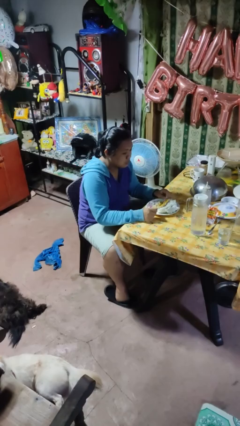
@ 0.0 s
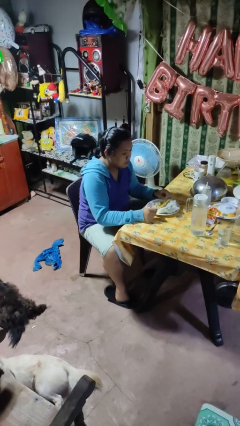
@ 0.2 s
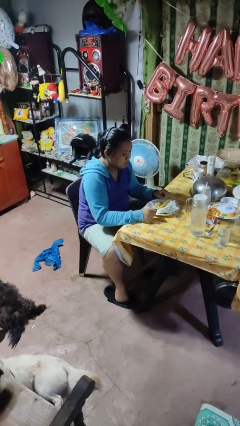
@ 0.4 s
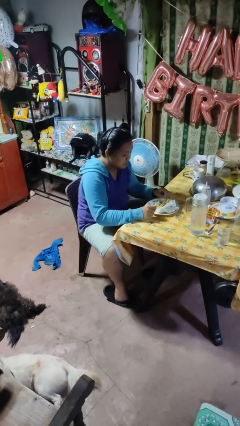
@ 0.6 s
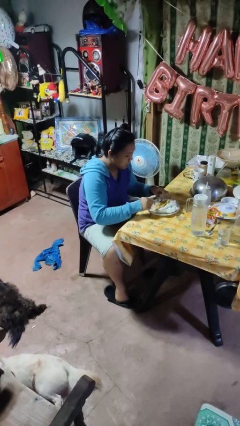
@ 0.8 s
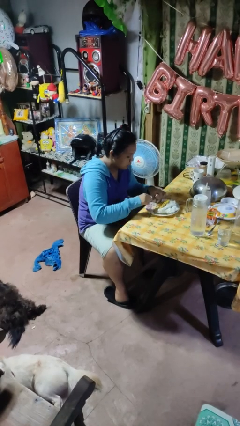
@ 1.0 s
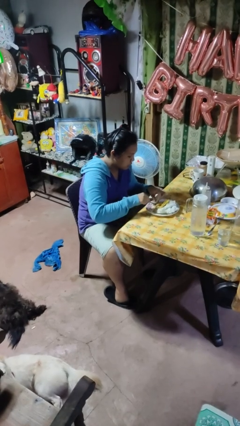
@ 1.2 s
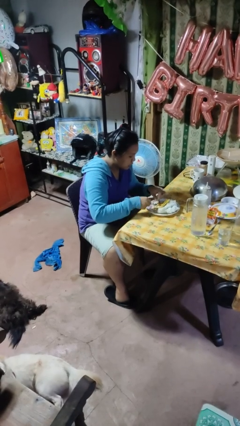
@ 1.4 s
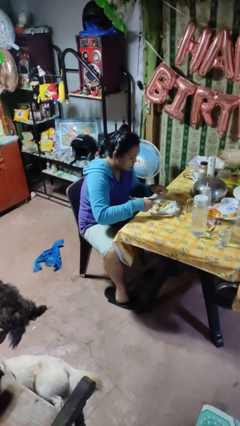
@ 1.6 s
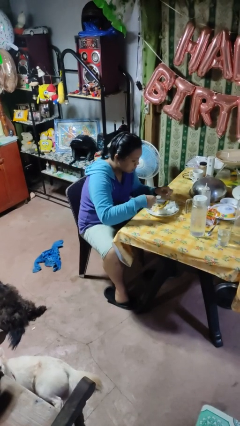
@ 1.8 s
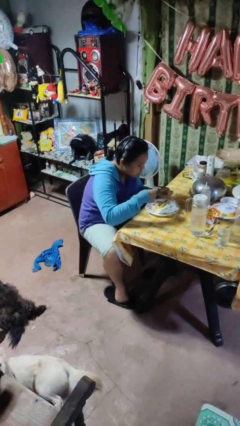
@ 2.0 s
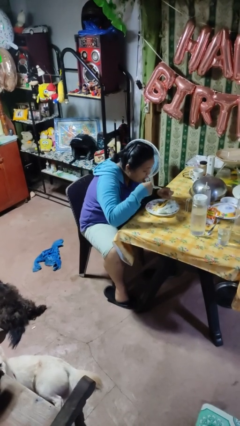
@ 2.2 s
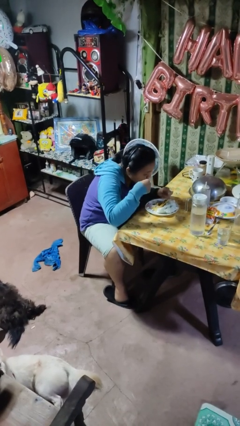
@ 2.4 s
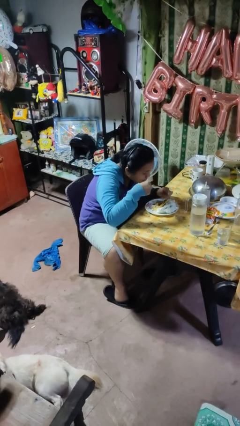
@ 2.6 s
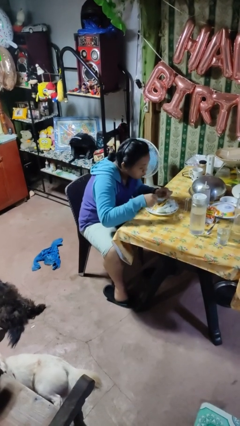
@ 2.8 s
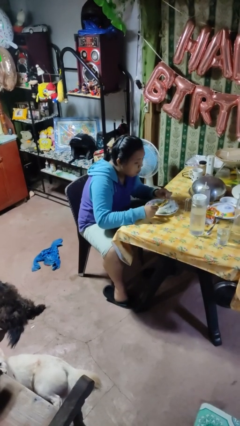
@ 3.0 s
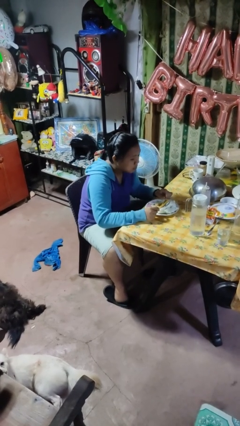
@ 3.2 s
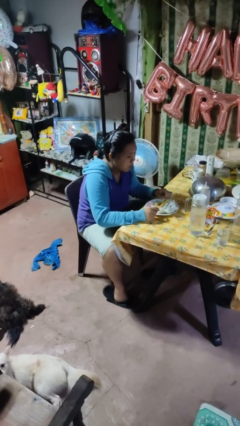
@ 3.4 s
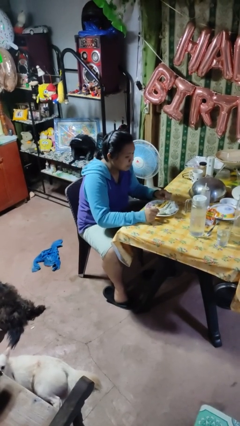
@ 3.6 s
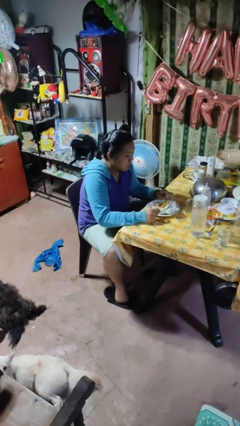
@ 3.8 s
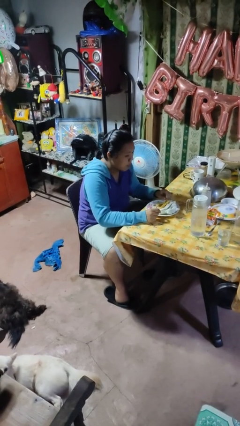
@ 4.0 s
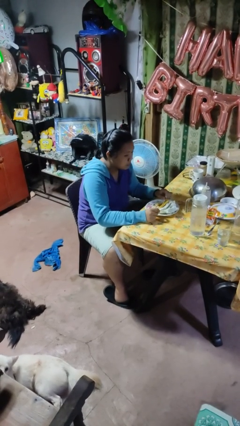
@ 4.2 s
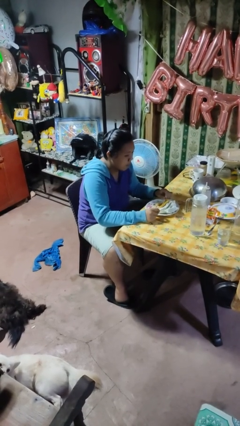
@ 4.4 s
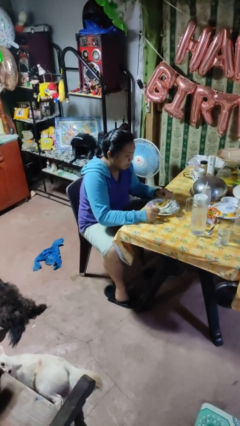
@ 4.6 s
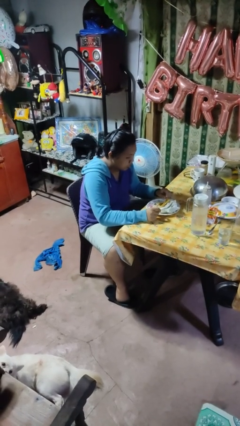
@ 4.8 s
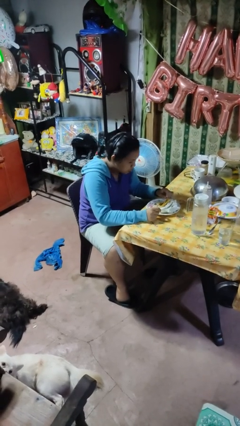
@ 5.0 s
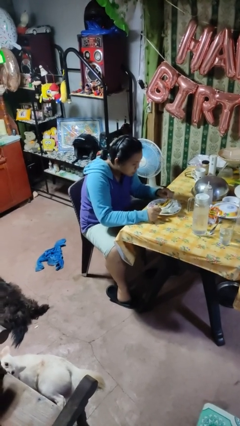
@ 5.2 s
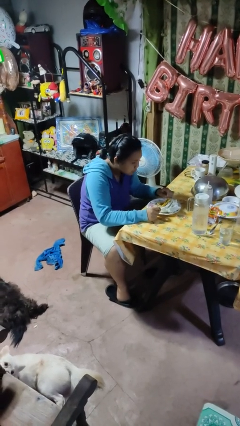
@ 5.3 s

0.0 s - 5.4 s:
person eats with utensil

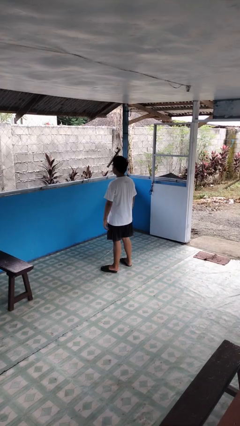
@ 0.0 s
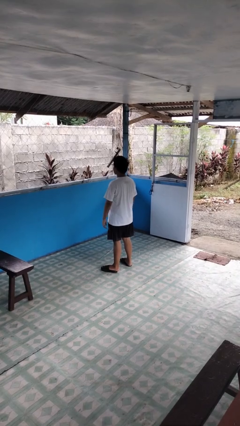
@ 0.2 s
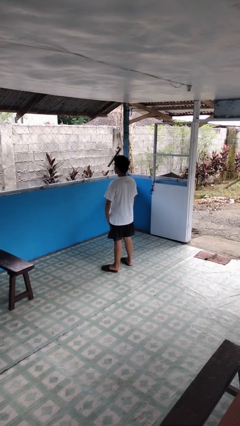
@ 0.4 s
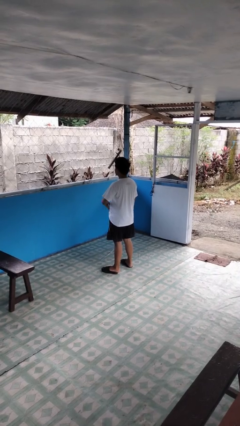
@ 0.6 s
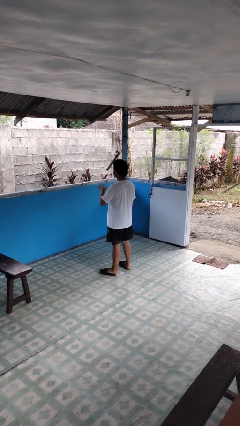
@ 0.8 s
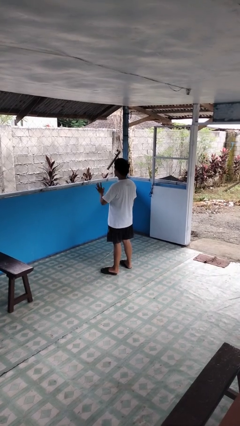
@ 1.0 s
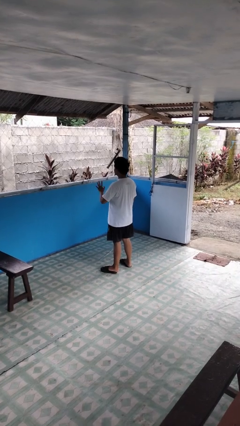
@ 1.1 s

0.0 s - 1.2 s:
person gestures number five

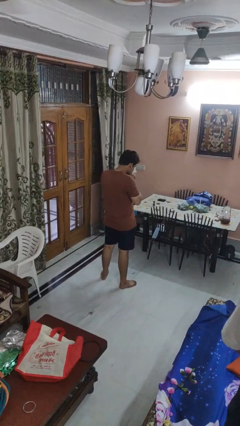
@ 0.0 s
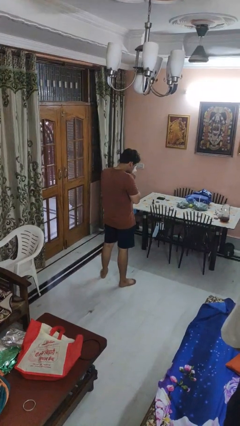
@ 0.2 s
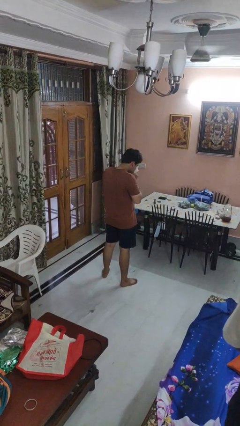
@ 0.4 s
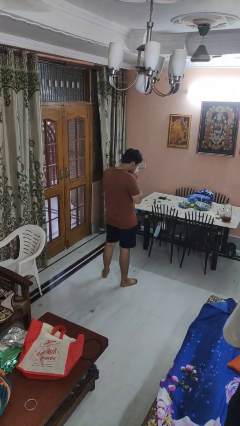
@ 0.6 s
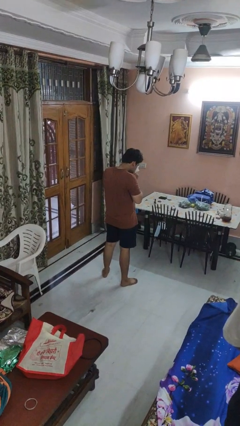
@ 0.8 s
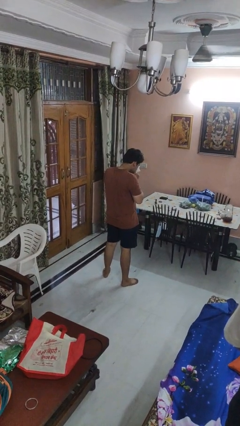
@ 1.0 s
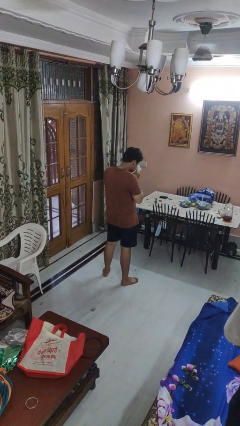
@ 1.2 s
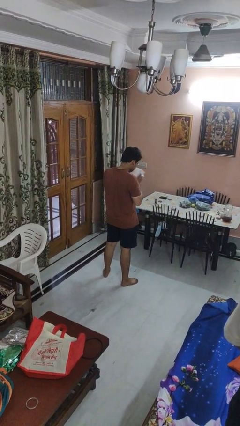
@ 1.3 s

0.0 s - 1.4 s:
person blows nose

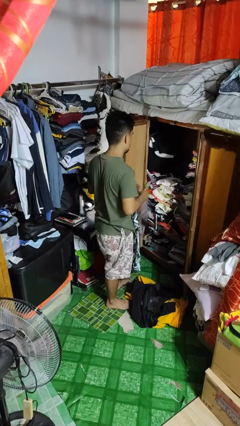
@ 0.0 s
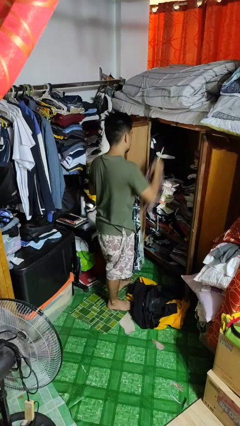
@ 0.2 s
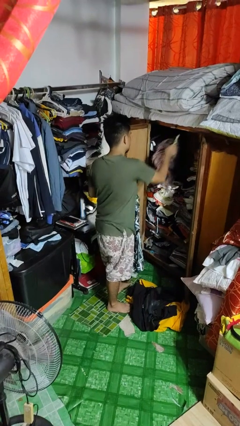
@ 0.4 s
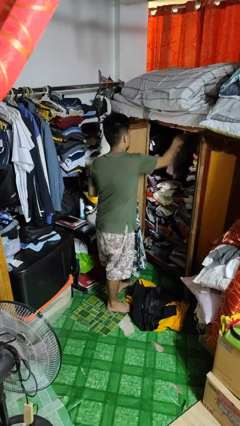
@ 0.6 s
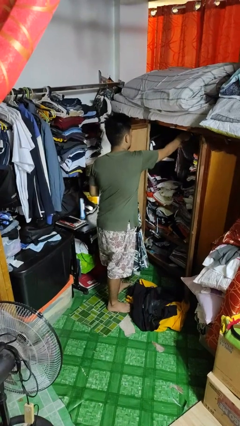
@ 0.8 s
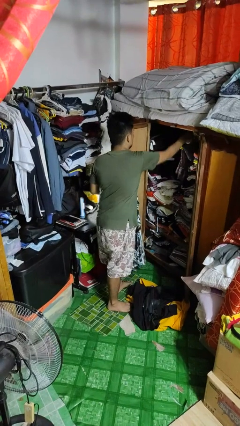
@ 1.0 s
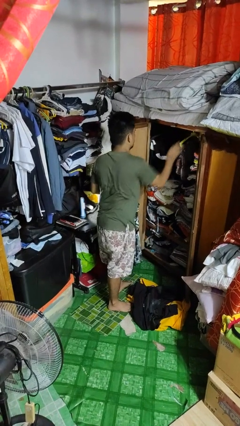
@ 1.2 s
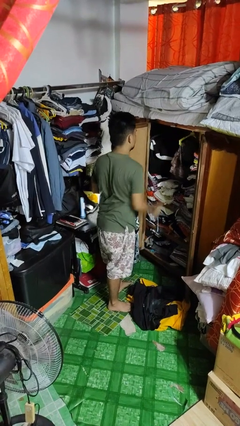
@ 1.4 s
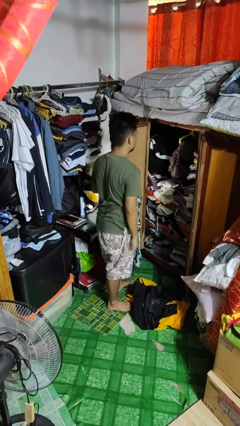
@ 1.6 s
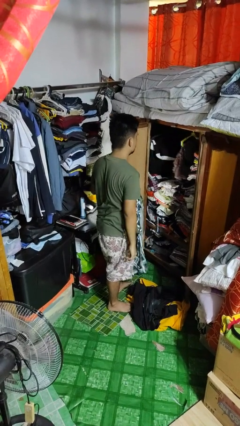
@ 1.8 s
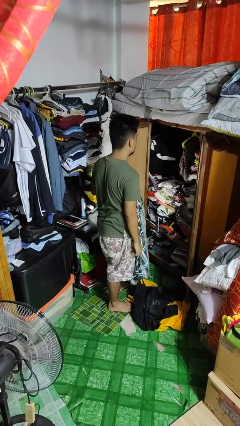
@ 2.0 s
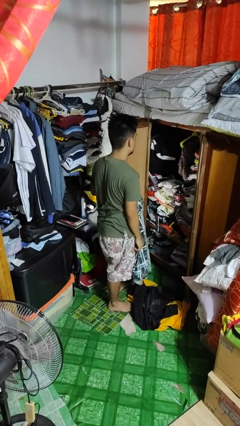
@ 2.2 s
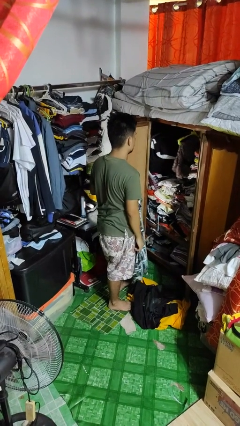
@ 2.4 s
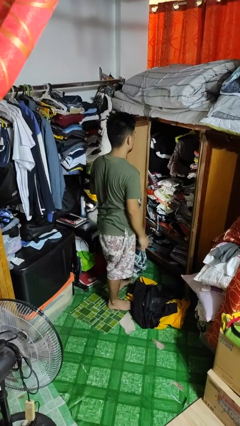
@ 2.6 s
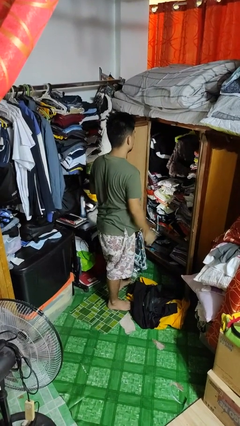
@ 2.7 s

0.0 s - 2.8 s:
person puts clothes into closet

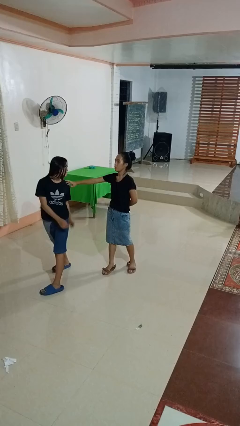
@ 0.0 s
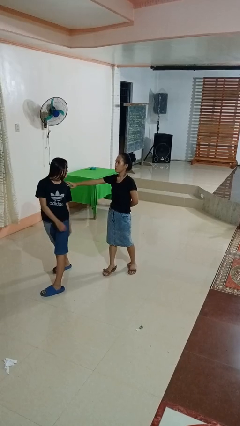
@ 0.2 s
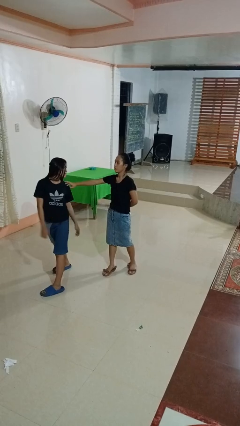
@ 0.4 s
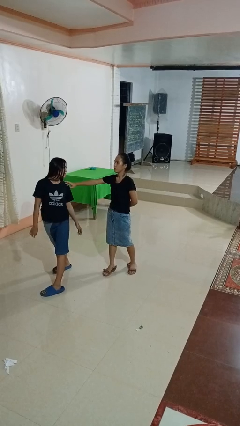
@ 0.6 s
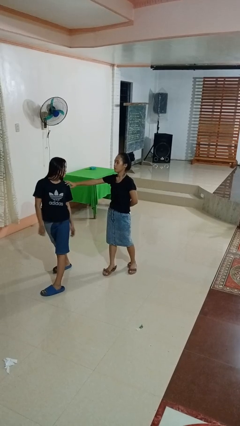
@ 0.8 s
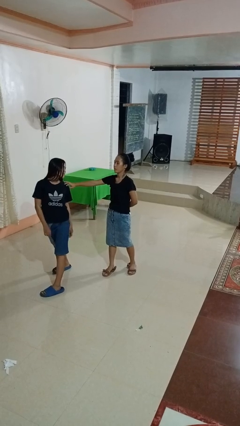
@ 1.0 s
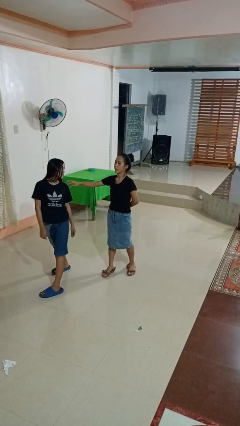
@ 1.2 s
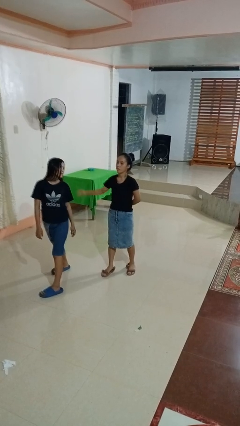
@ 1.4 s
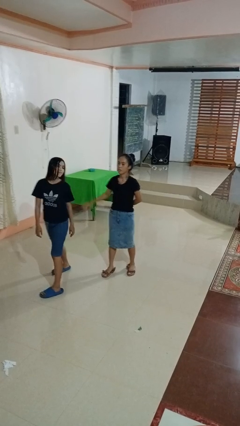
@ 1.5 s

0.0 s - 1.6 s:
person spins person around

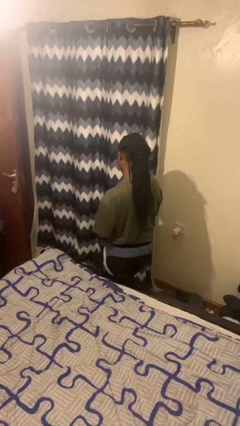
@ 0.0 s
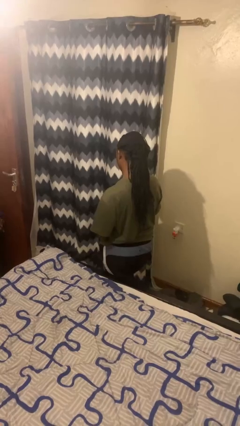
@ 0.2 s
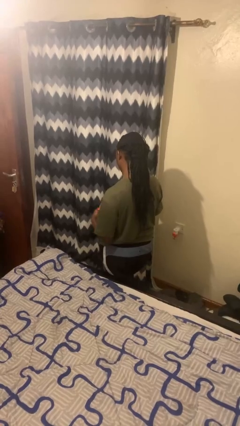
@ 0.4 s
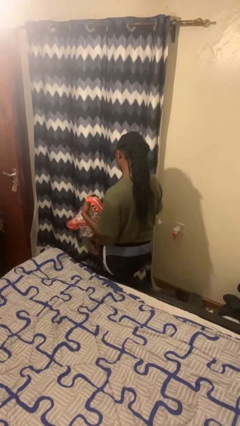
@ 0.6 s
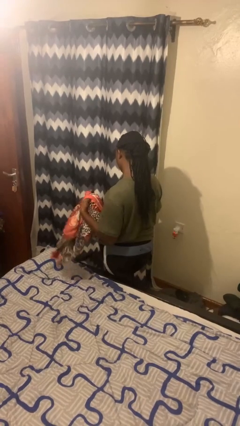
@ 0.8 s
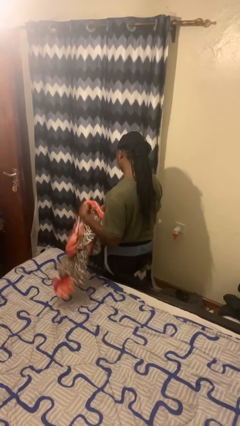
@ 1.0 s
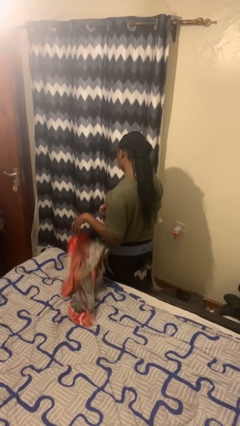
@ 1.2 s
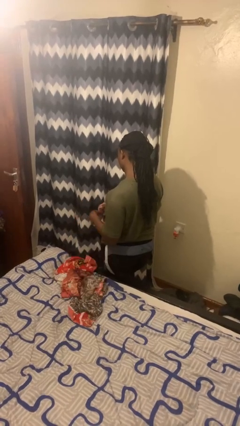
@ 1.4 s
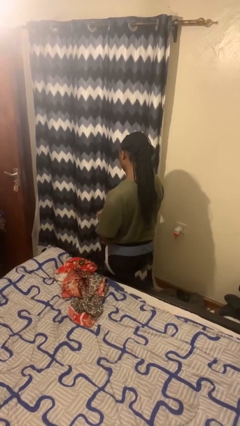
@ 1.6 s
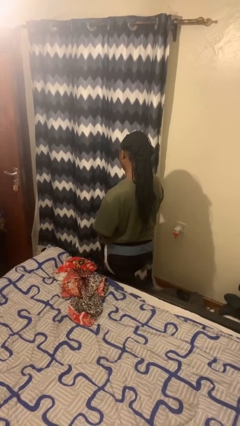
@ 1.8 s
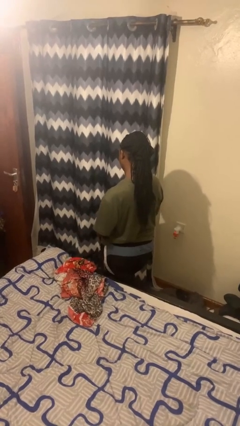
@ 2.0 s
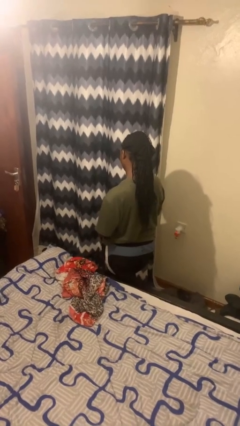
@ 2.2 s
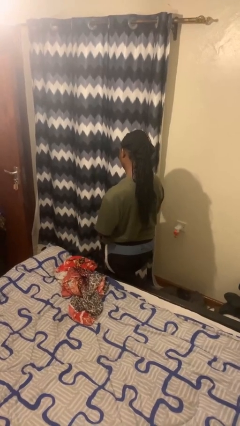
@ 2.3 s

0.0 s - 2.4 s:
person throws object on bed

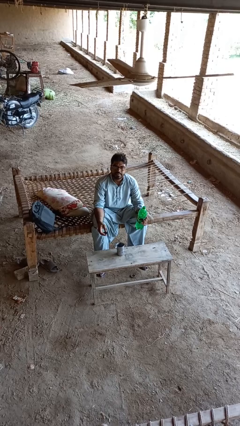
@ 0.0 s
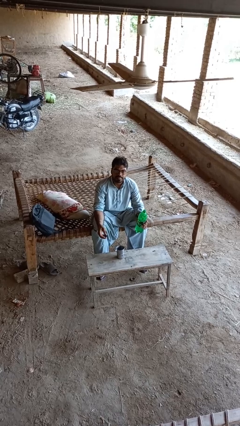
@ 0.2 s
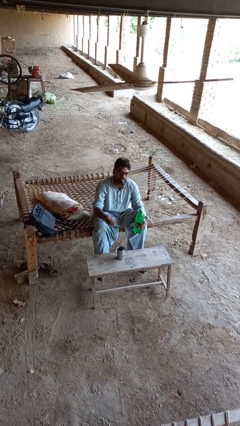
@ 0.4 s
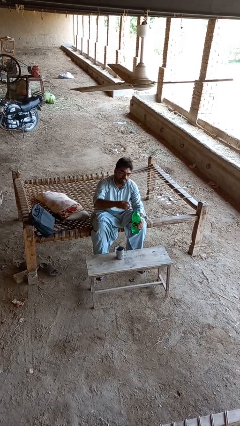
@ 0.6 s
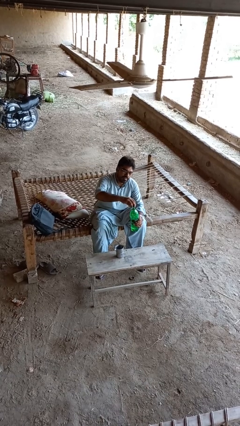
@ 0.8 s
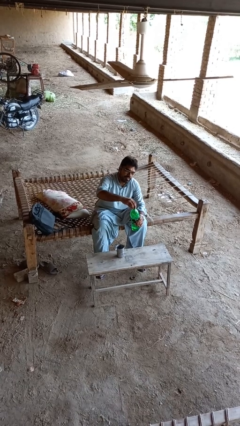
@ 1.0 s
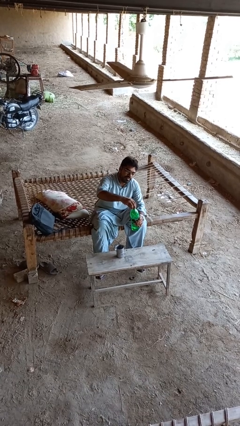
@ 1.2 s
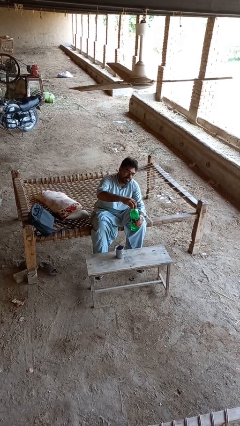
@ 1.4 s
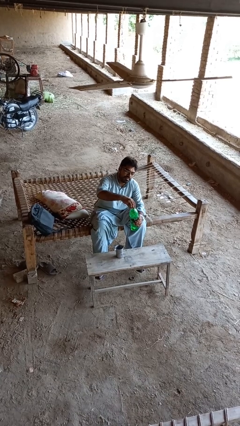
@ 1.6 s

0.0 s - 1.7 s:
person screws lid to bottle

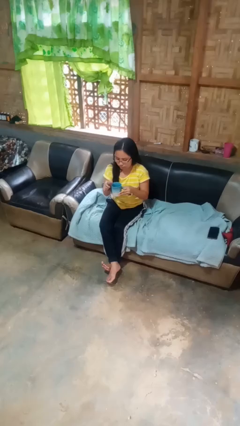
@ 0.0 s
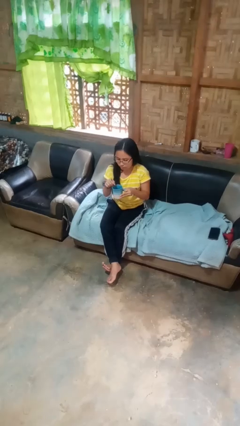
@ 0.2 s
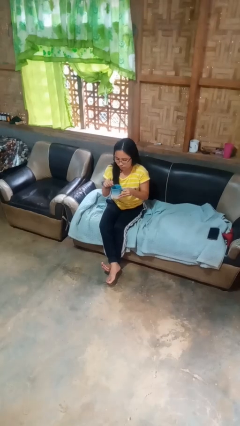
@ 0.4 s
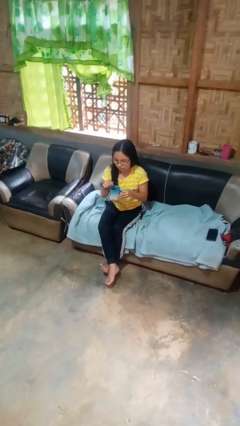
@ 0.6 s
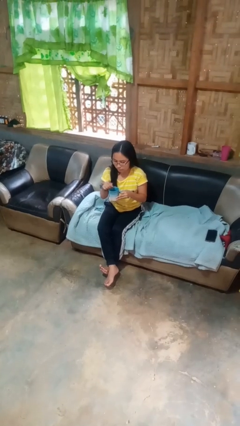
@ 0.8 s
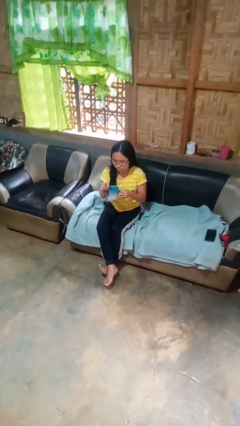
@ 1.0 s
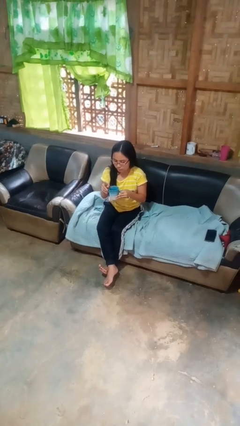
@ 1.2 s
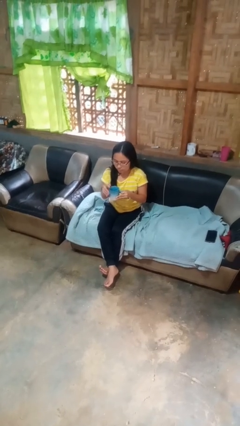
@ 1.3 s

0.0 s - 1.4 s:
person stirs mug
